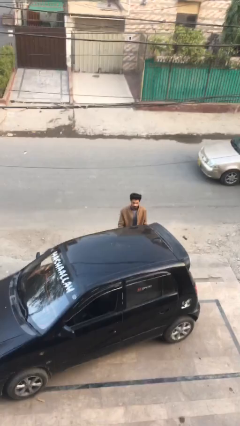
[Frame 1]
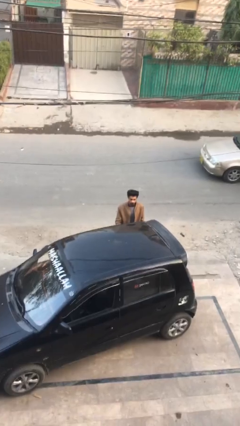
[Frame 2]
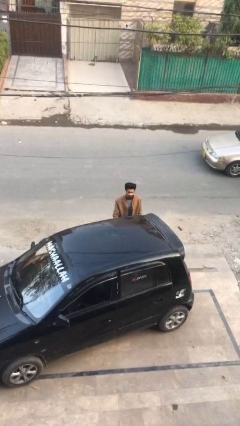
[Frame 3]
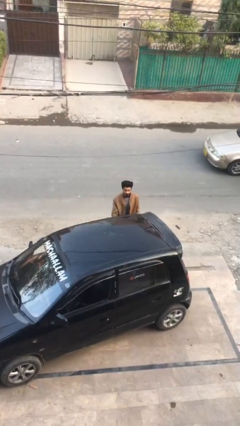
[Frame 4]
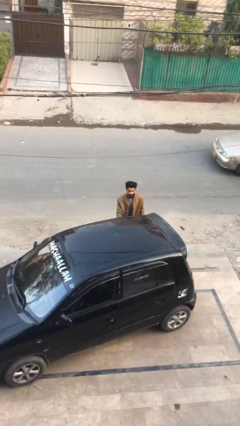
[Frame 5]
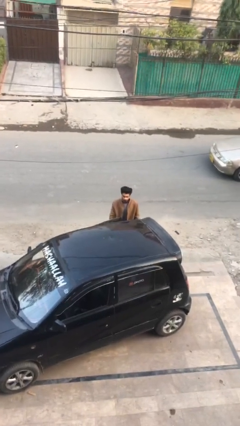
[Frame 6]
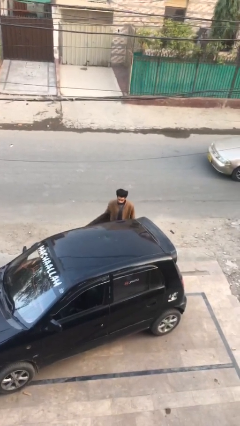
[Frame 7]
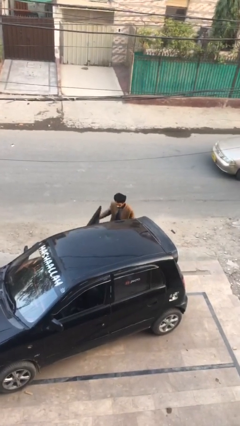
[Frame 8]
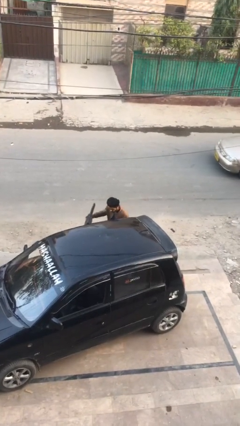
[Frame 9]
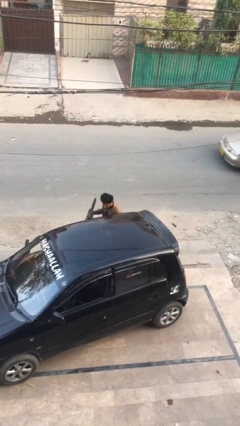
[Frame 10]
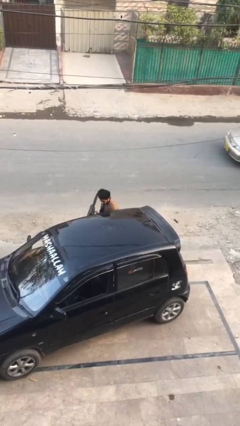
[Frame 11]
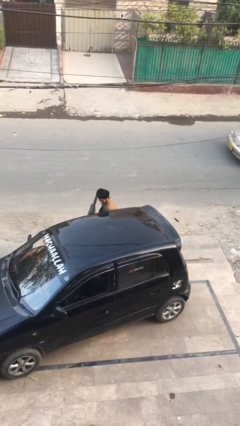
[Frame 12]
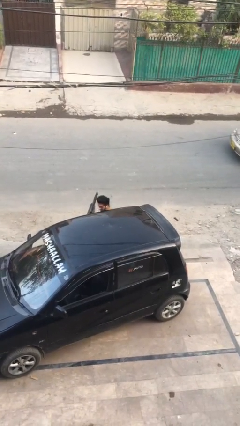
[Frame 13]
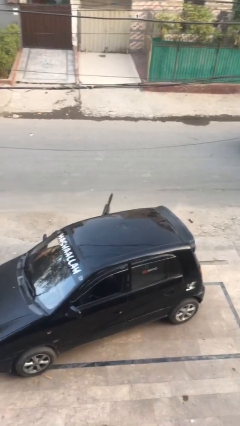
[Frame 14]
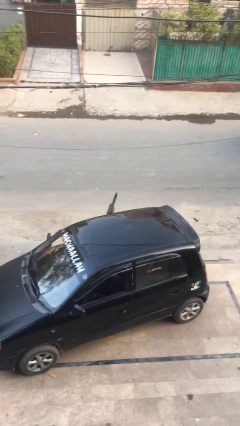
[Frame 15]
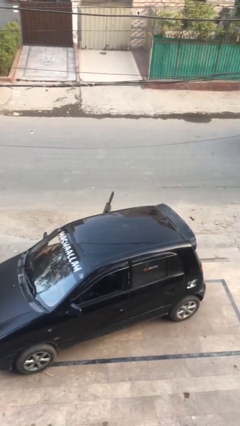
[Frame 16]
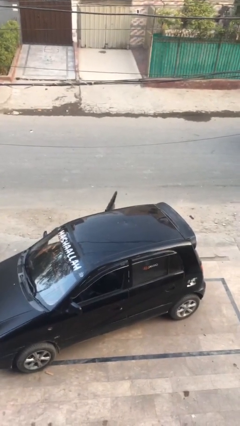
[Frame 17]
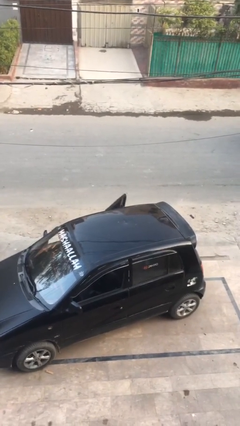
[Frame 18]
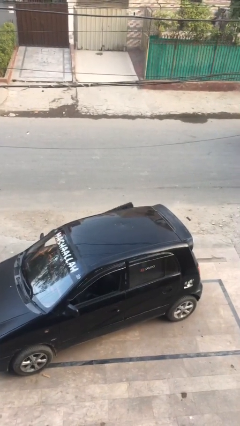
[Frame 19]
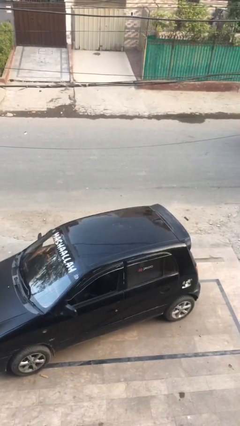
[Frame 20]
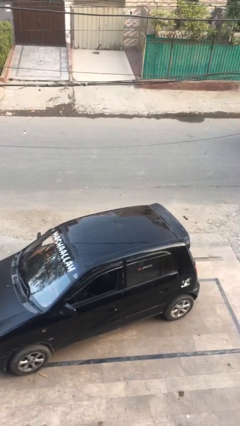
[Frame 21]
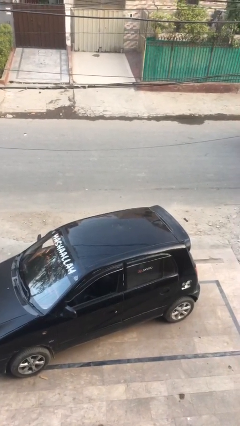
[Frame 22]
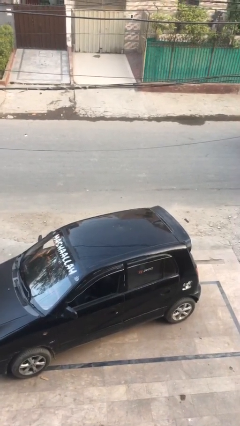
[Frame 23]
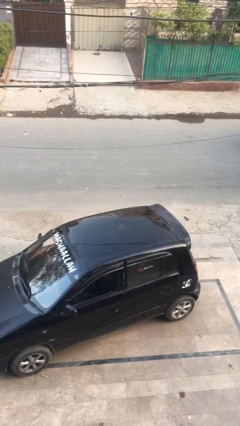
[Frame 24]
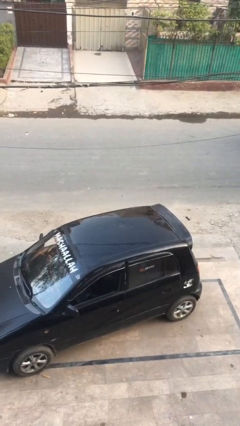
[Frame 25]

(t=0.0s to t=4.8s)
person enters car

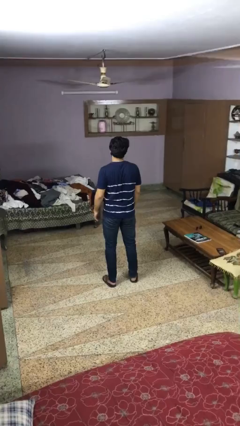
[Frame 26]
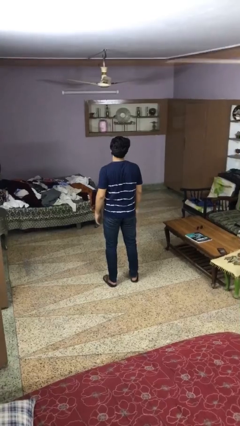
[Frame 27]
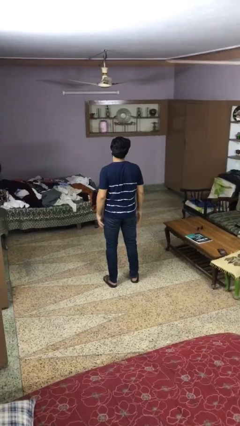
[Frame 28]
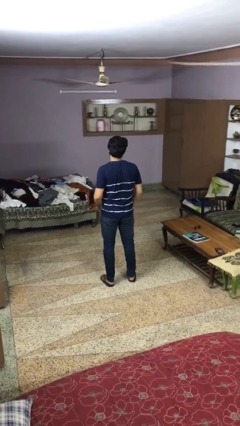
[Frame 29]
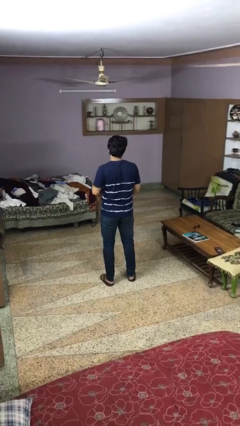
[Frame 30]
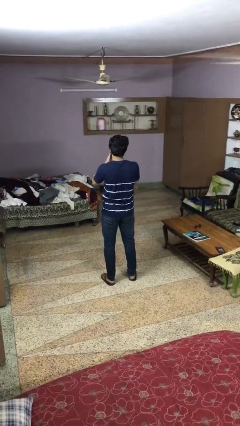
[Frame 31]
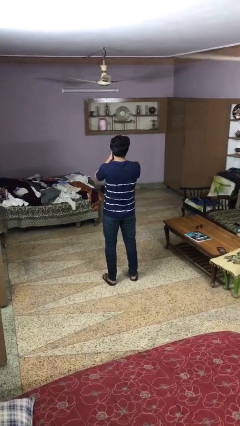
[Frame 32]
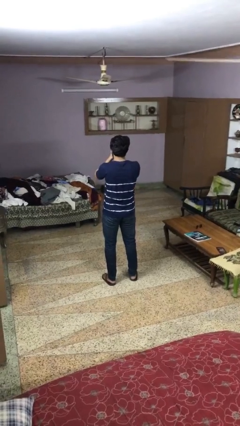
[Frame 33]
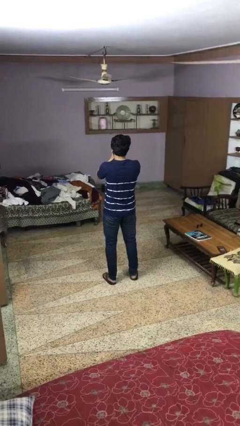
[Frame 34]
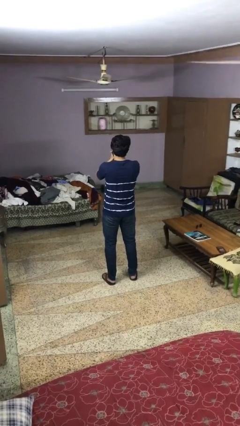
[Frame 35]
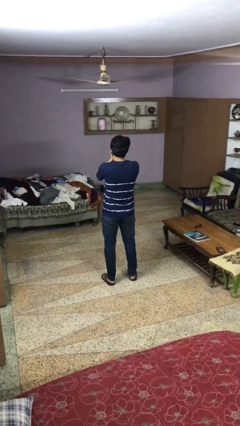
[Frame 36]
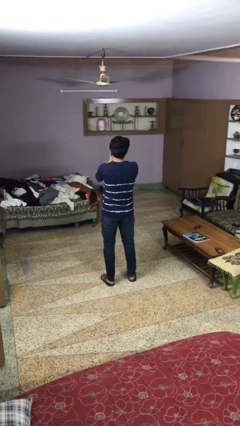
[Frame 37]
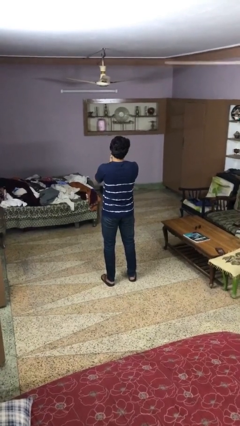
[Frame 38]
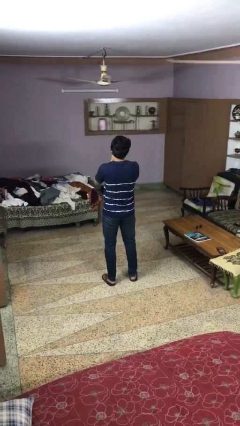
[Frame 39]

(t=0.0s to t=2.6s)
person covers face with hands

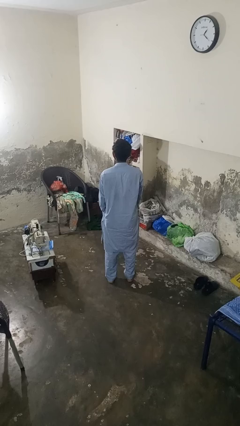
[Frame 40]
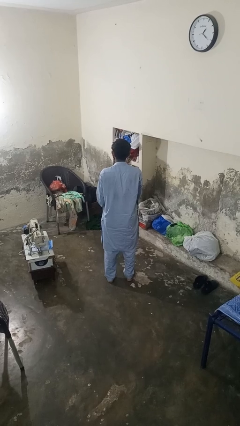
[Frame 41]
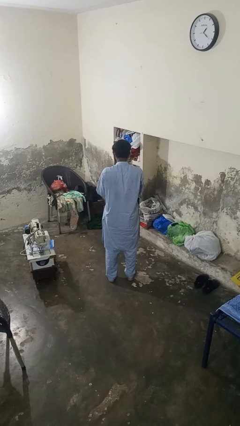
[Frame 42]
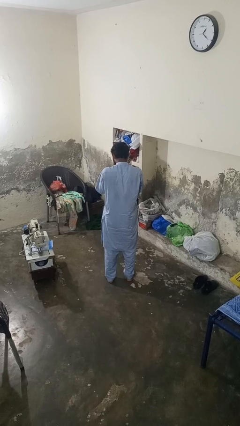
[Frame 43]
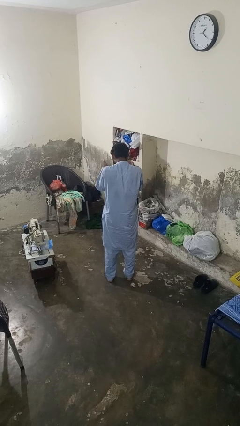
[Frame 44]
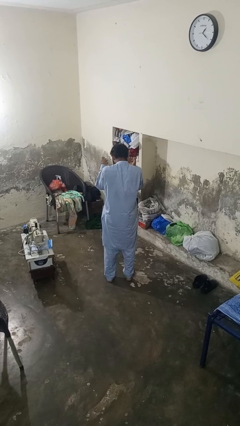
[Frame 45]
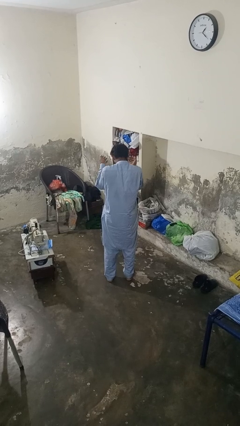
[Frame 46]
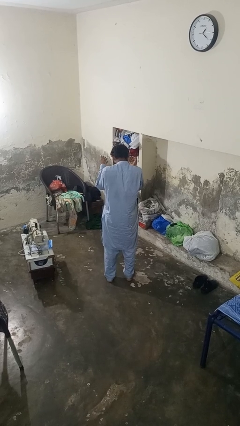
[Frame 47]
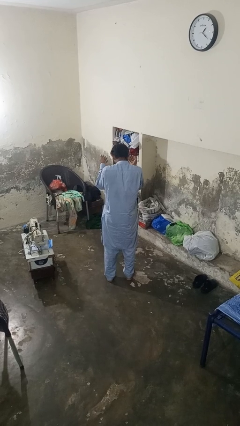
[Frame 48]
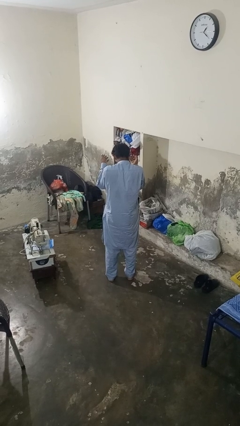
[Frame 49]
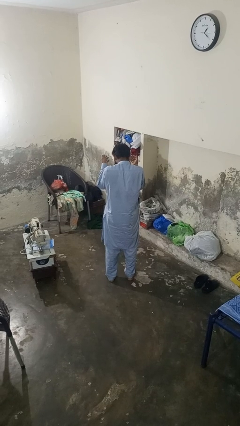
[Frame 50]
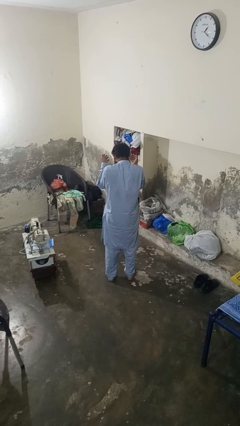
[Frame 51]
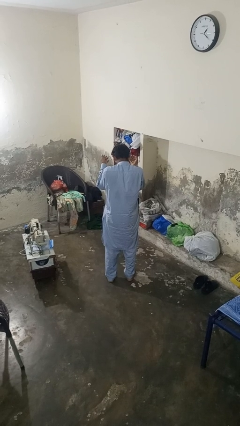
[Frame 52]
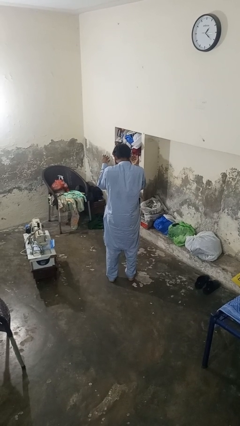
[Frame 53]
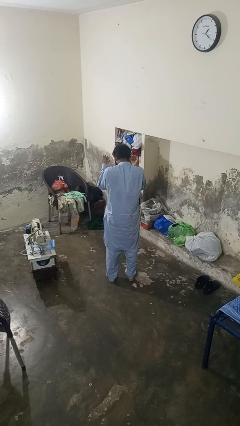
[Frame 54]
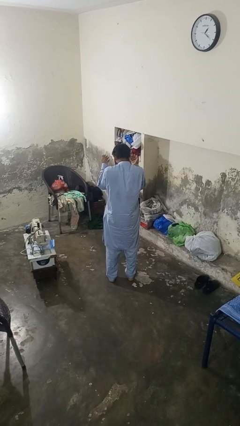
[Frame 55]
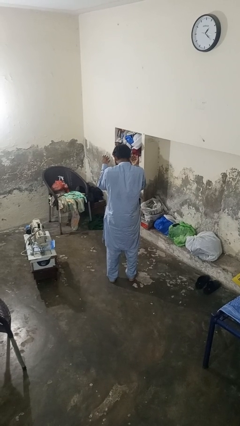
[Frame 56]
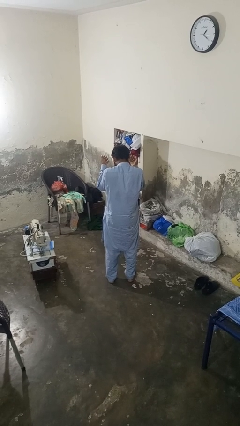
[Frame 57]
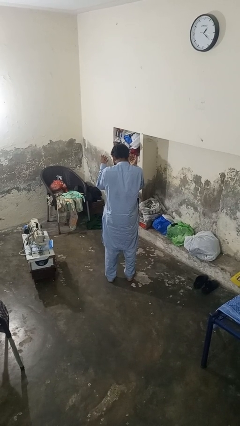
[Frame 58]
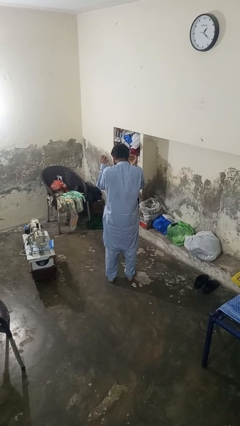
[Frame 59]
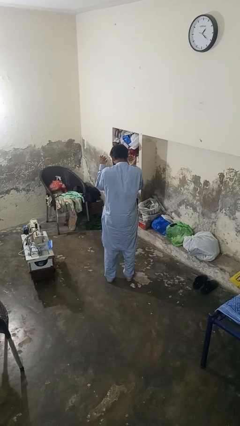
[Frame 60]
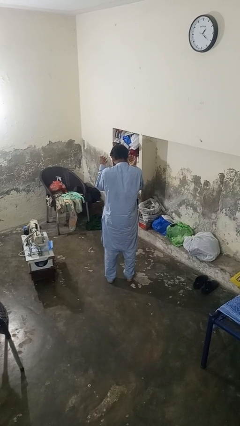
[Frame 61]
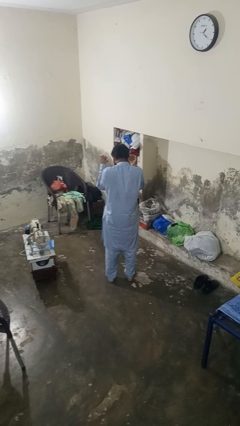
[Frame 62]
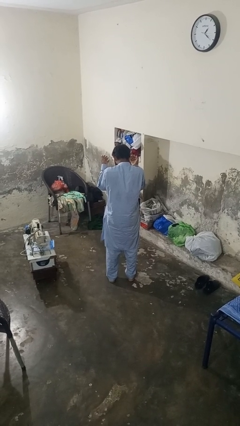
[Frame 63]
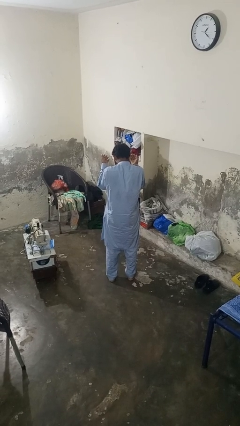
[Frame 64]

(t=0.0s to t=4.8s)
person prays

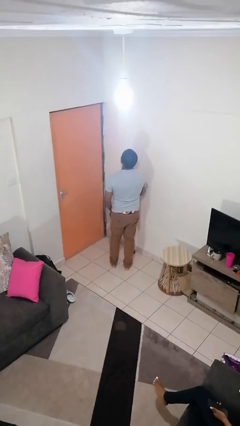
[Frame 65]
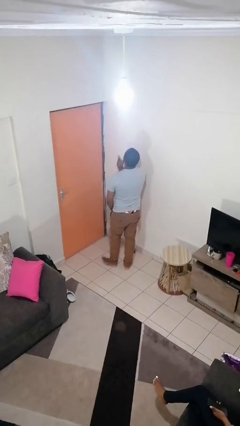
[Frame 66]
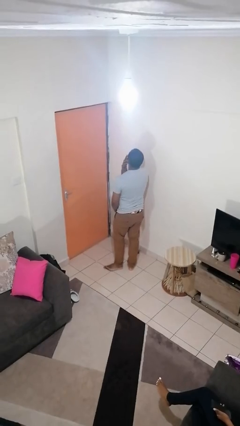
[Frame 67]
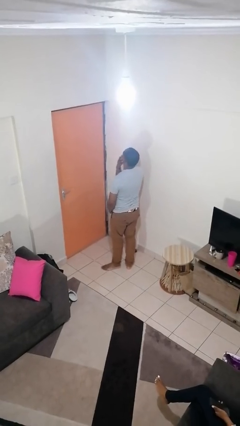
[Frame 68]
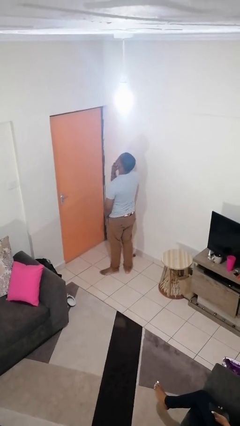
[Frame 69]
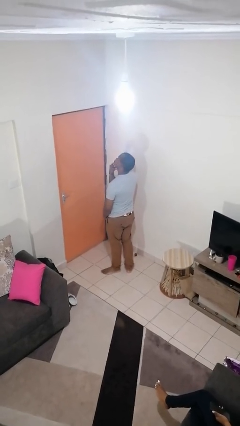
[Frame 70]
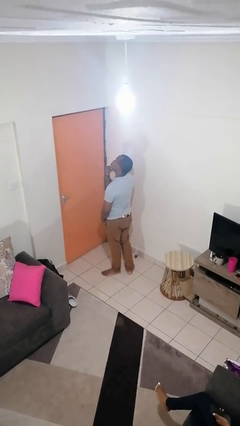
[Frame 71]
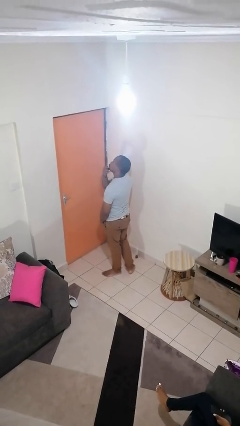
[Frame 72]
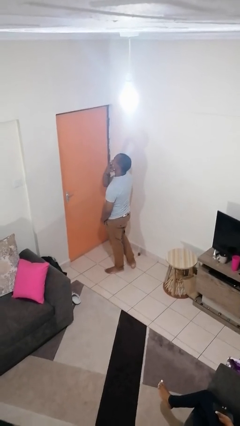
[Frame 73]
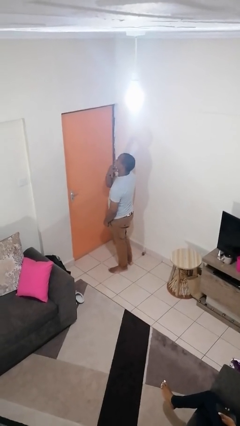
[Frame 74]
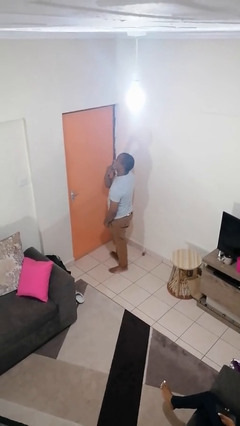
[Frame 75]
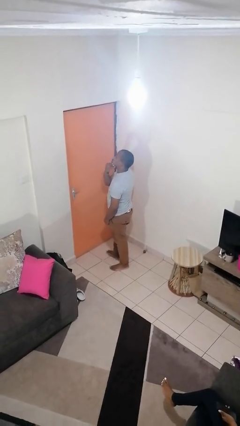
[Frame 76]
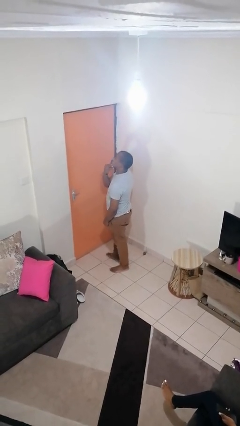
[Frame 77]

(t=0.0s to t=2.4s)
person strokes chin

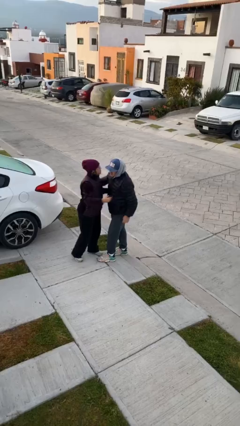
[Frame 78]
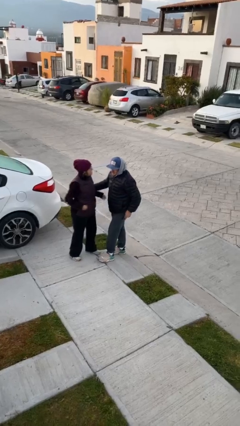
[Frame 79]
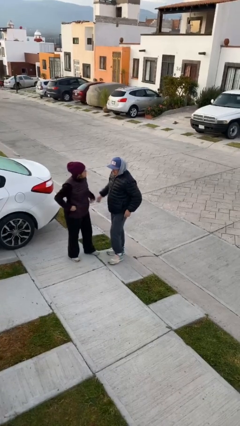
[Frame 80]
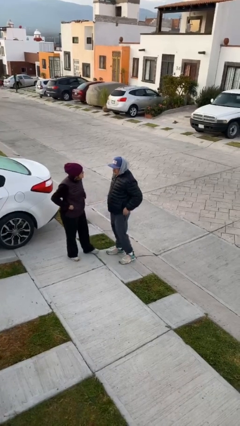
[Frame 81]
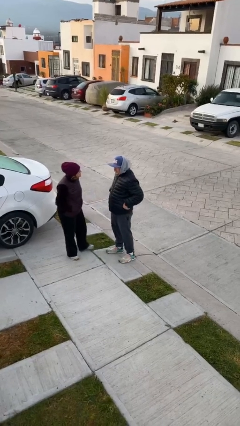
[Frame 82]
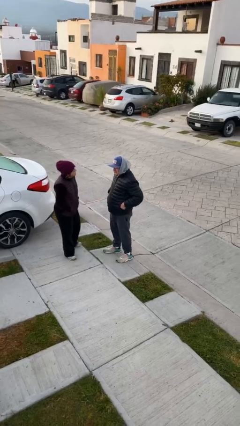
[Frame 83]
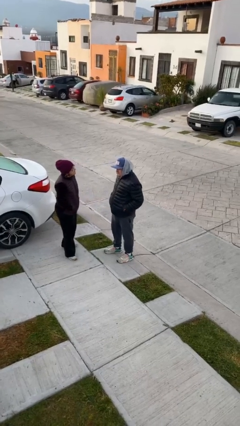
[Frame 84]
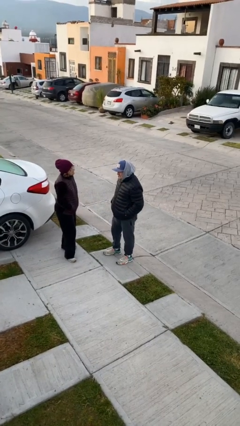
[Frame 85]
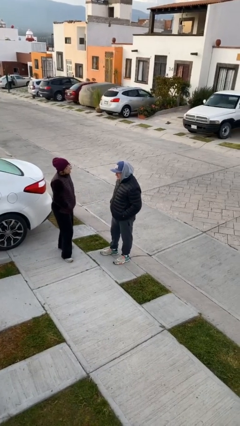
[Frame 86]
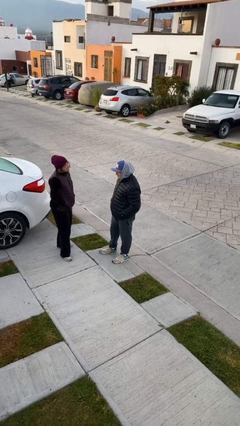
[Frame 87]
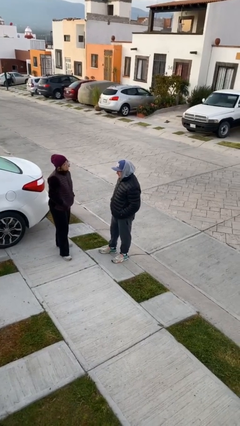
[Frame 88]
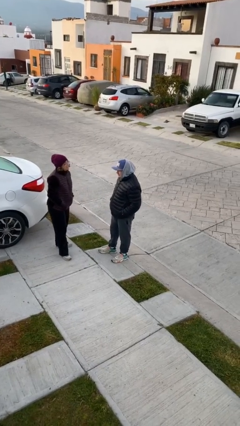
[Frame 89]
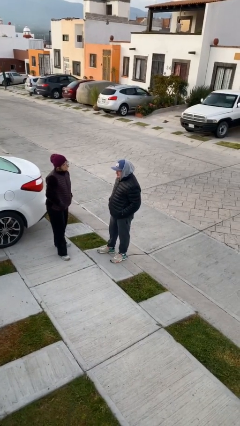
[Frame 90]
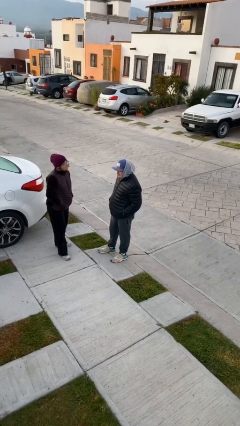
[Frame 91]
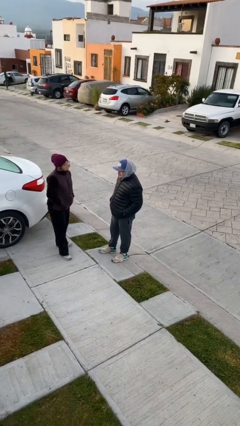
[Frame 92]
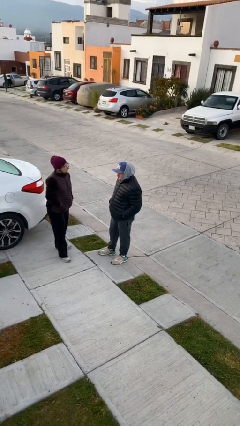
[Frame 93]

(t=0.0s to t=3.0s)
person talks to person

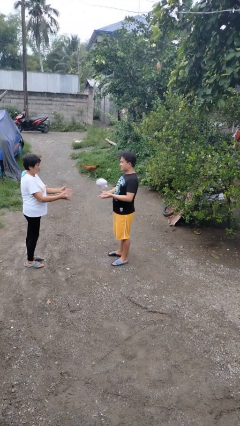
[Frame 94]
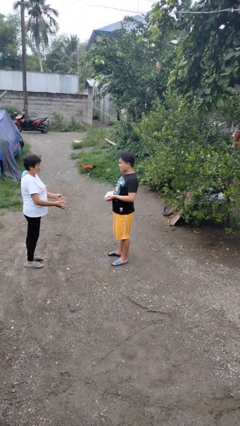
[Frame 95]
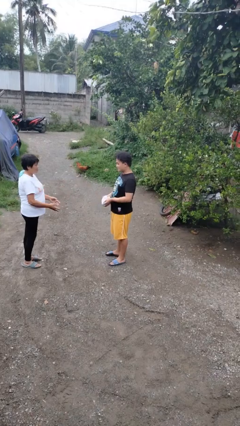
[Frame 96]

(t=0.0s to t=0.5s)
person catches object from person
